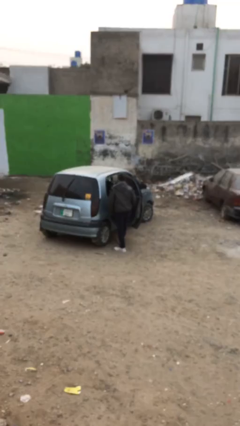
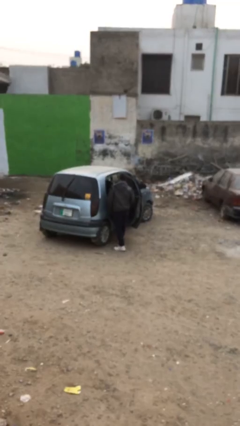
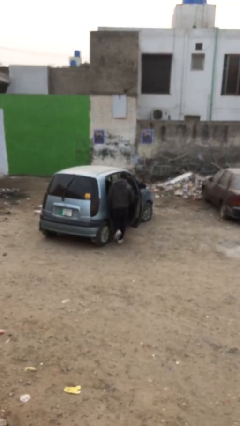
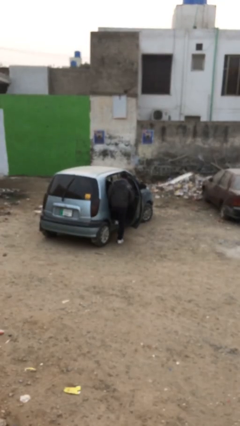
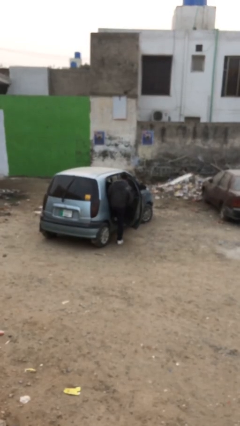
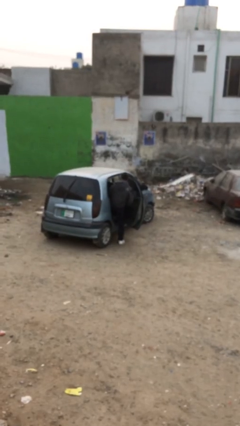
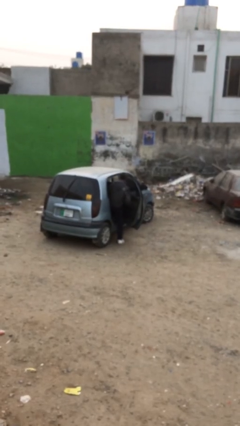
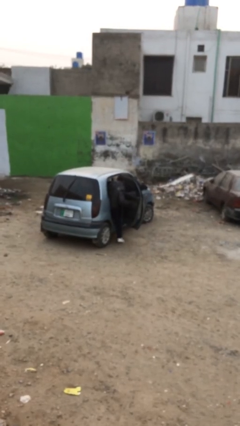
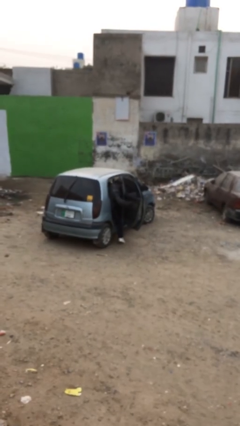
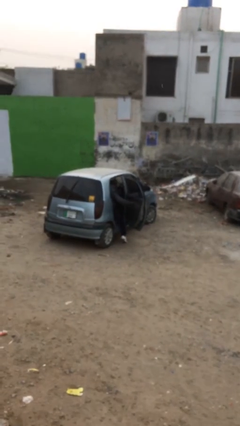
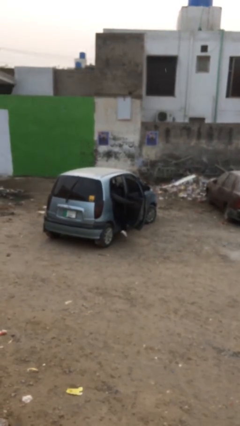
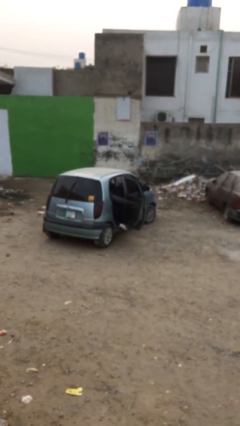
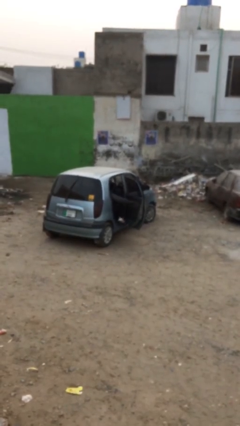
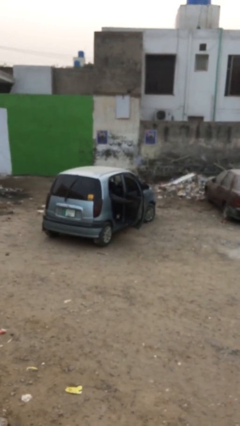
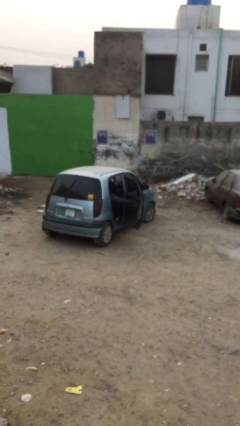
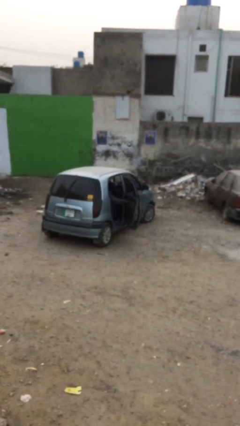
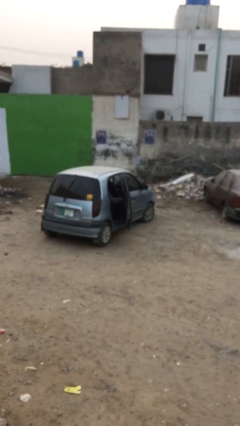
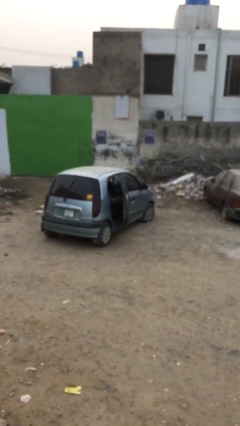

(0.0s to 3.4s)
person enters car

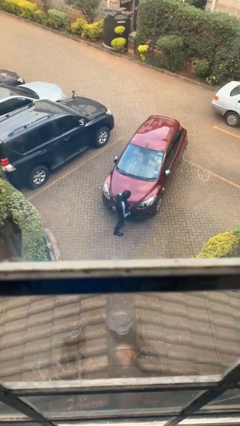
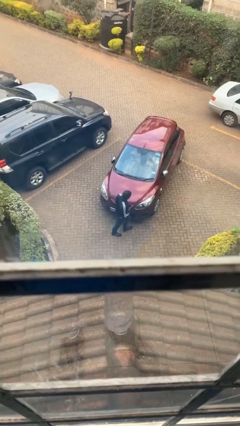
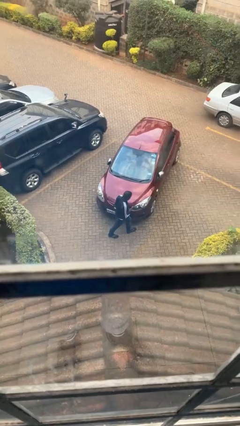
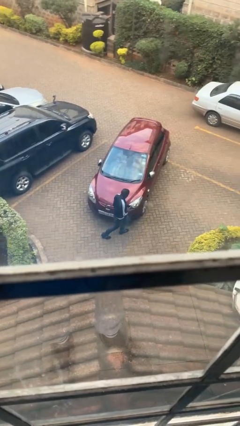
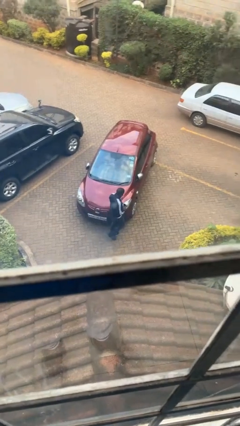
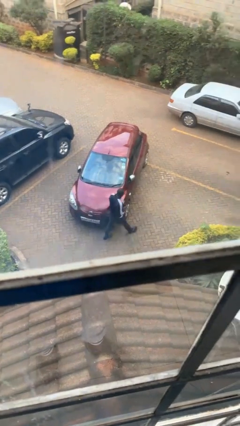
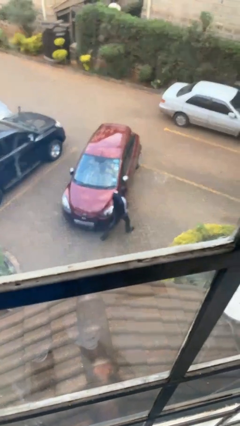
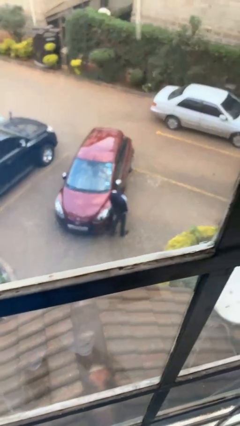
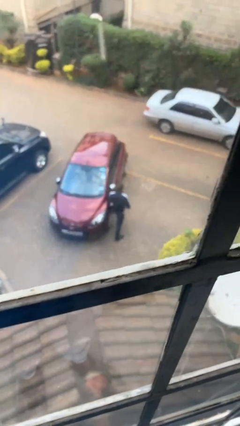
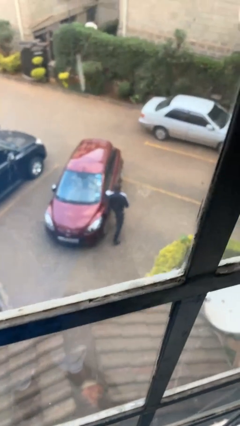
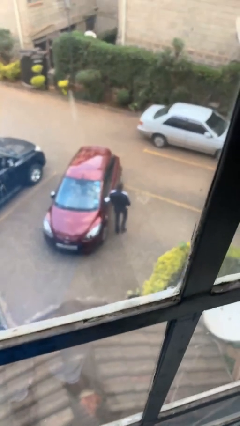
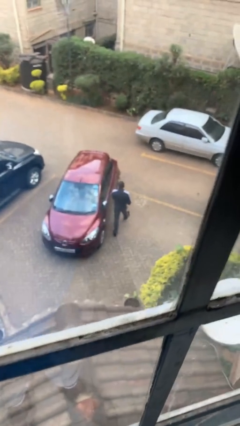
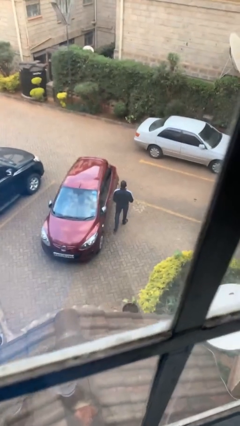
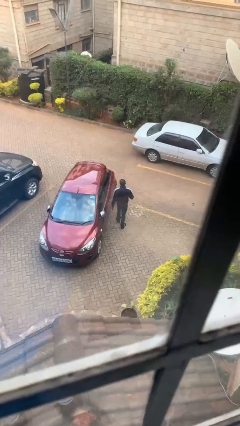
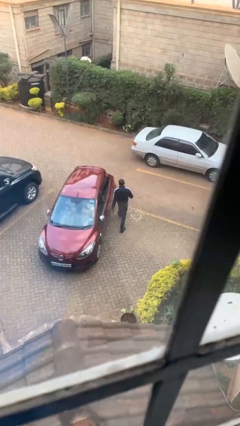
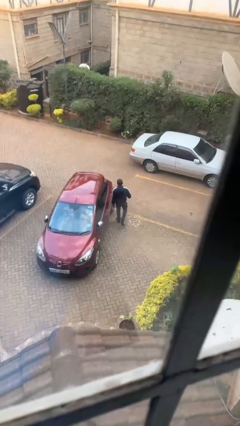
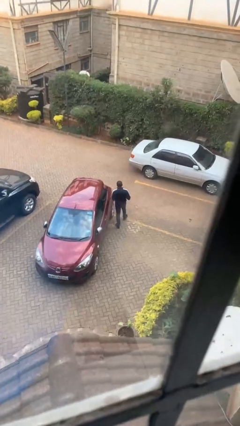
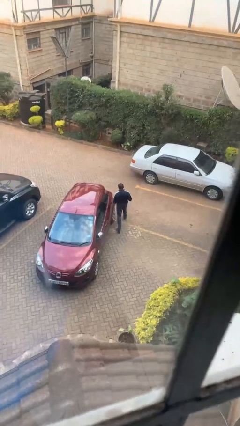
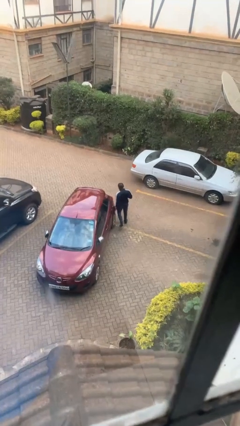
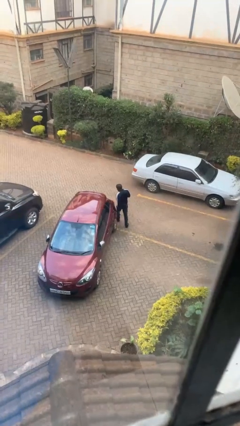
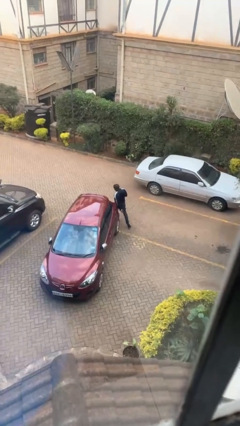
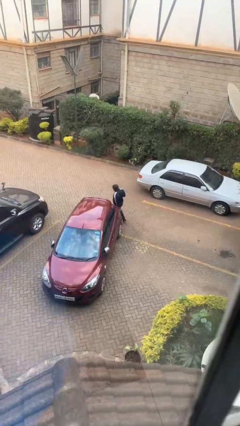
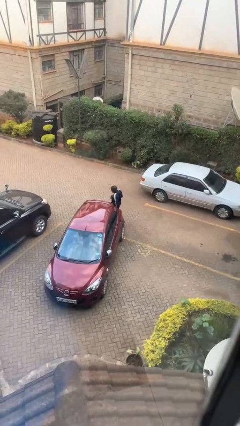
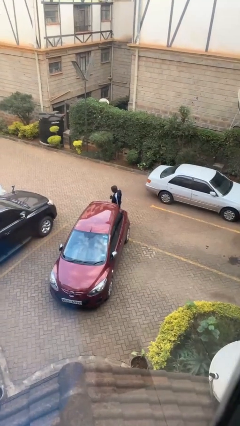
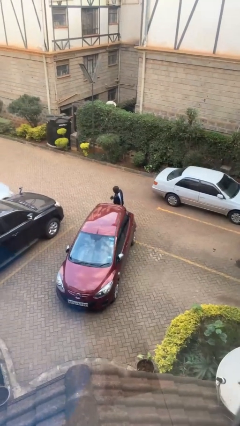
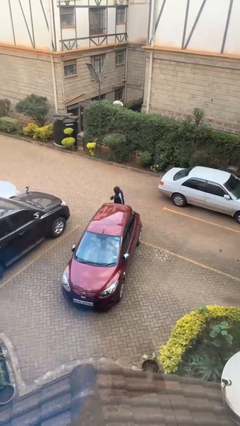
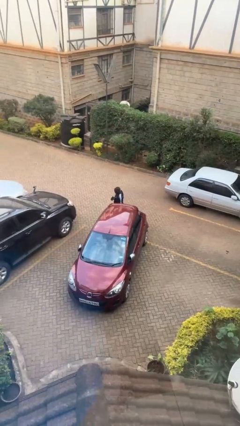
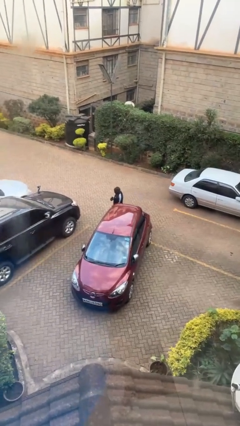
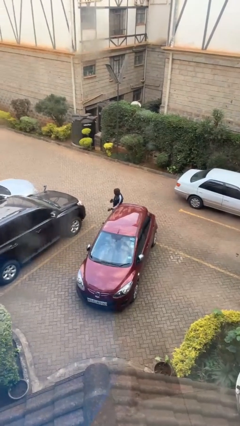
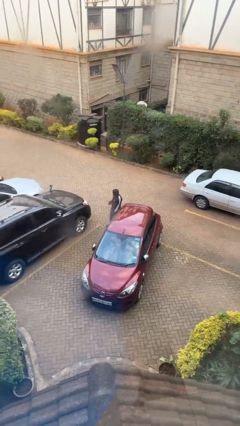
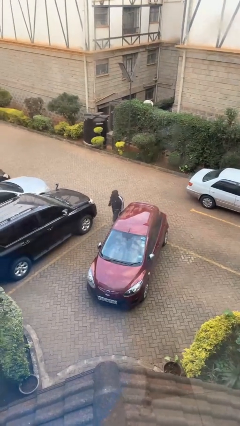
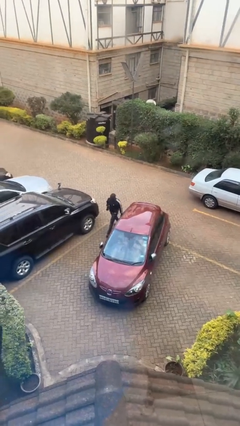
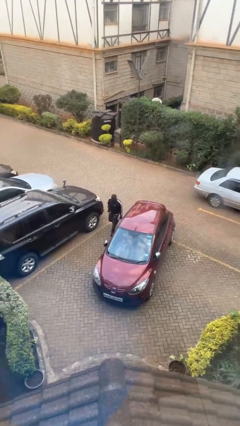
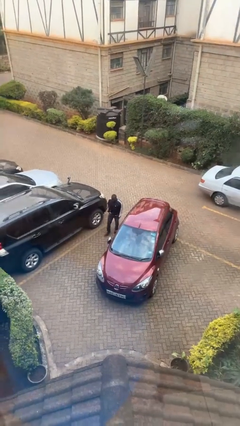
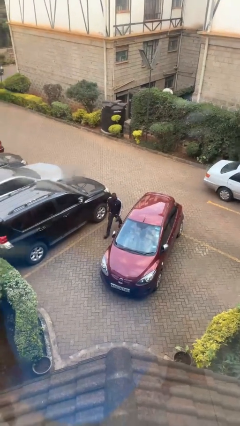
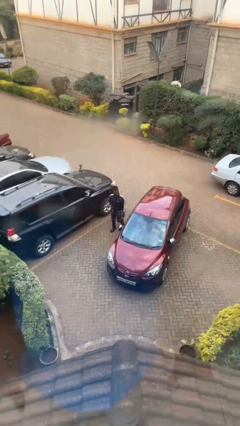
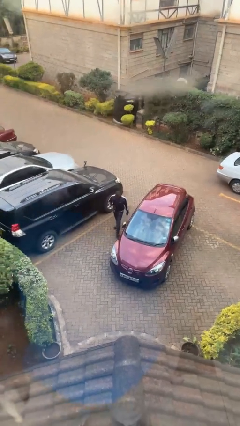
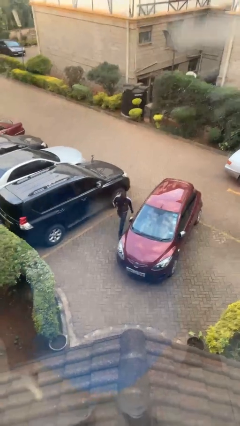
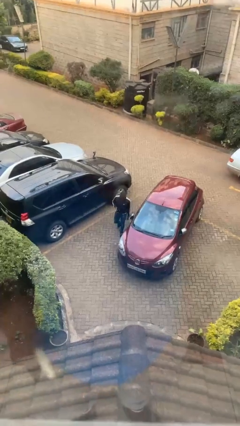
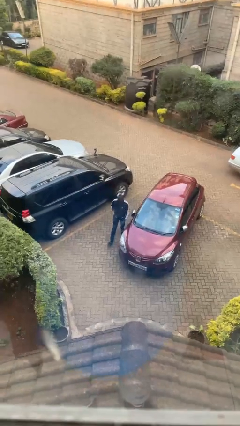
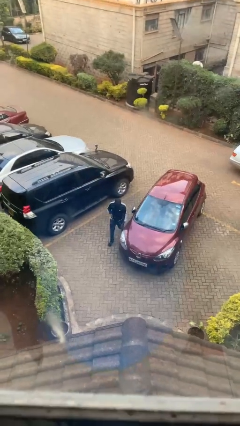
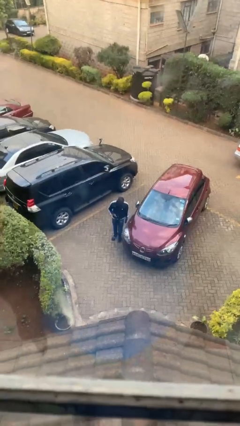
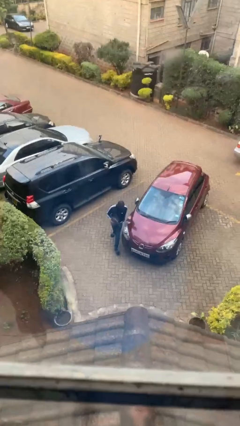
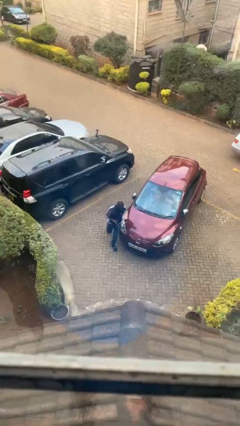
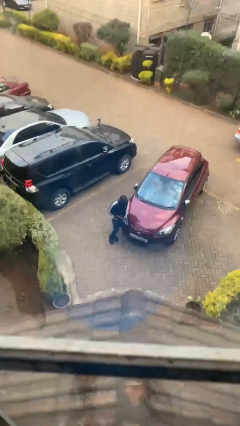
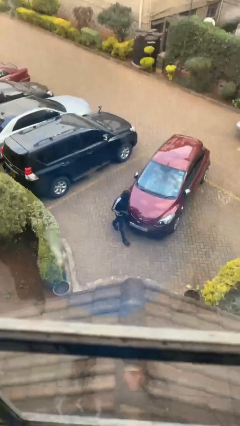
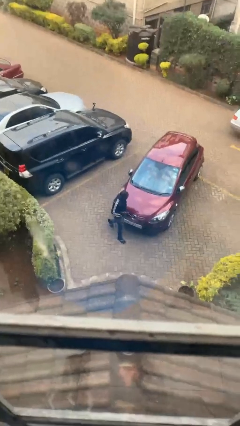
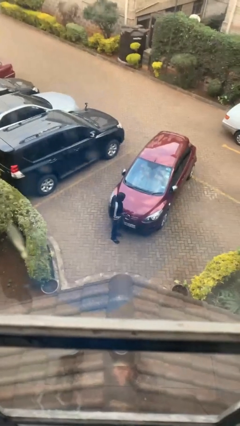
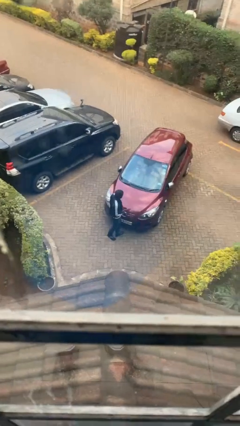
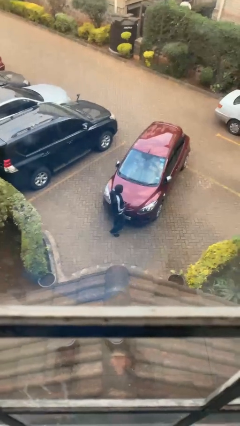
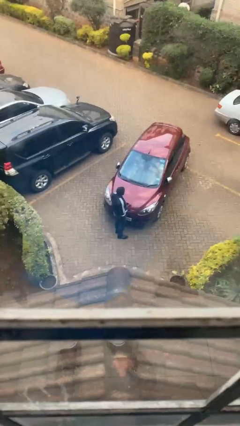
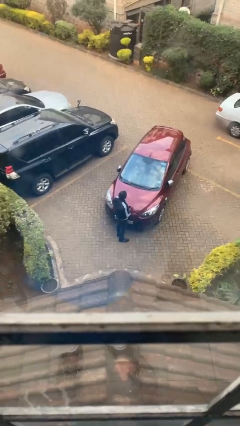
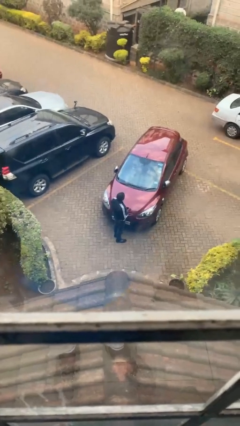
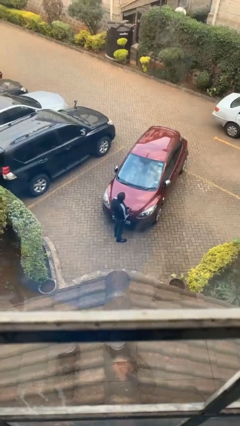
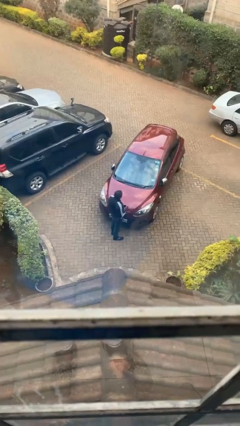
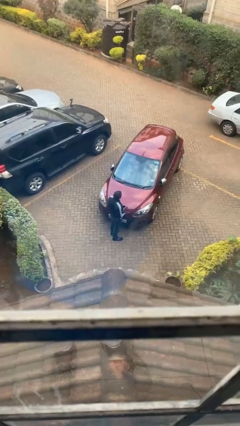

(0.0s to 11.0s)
person walks around car

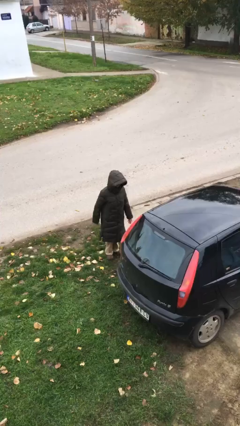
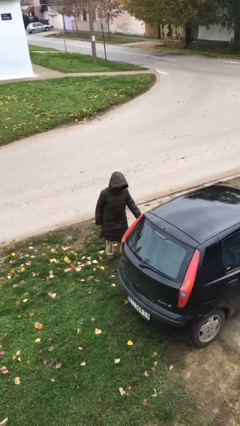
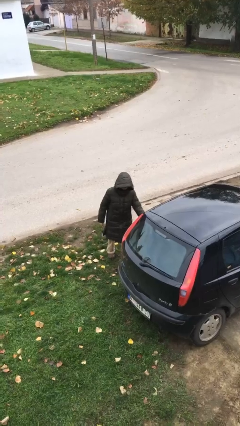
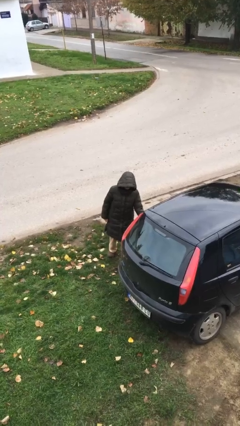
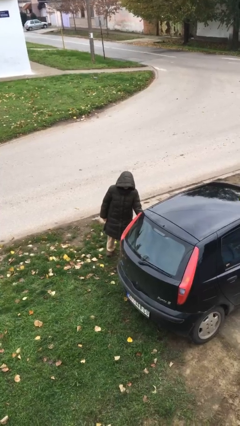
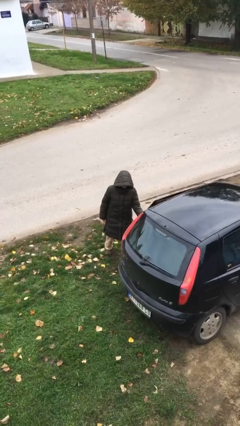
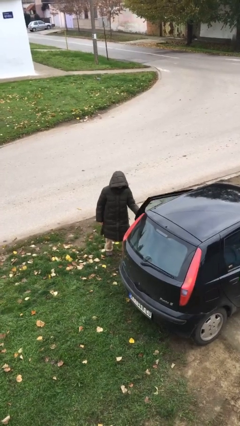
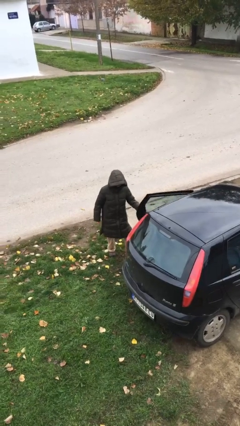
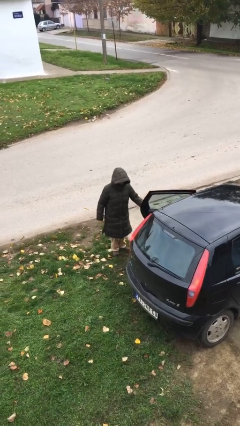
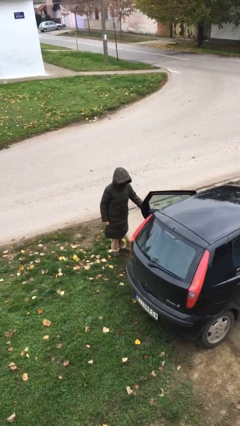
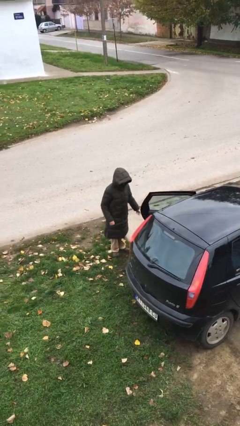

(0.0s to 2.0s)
person opens car door

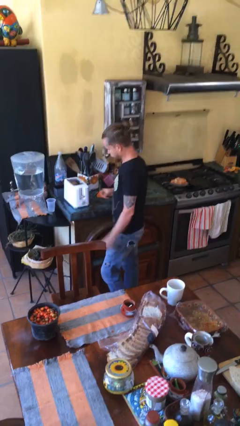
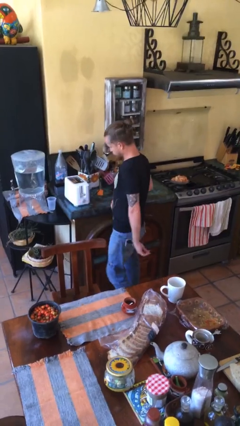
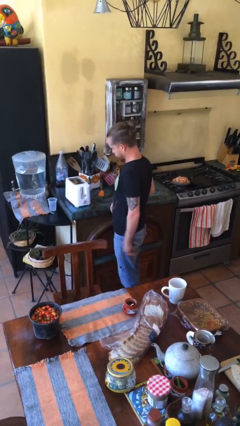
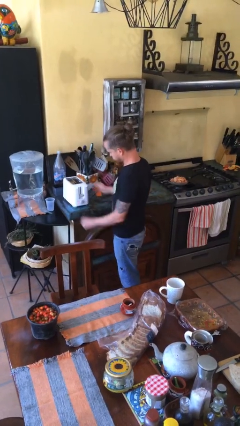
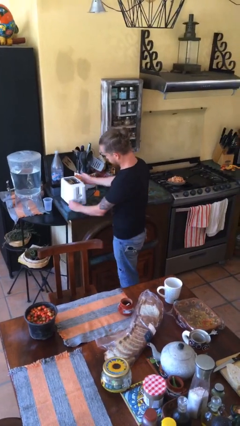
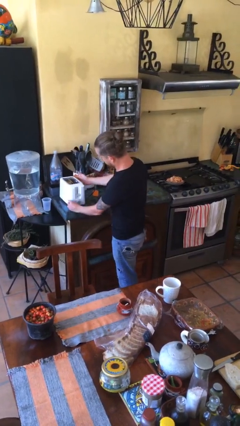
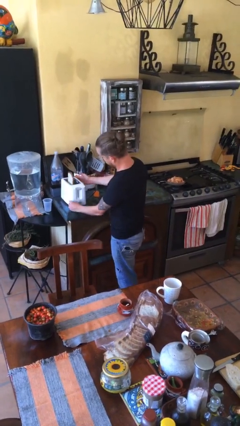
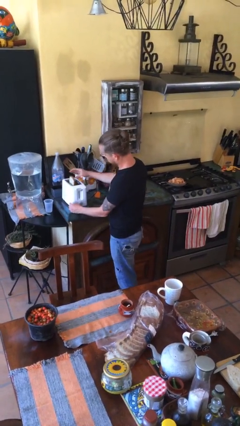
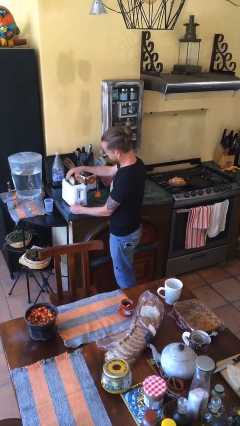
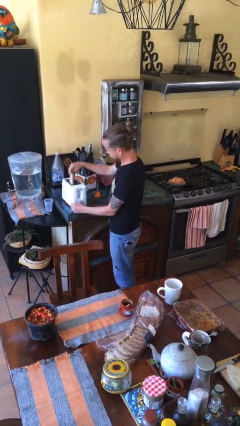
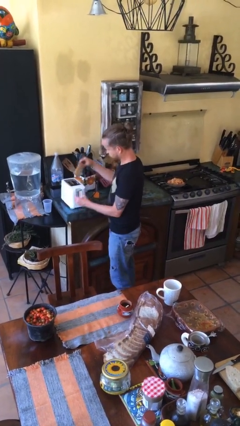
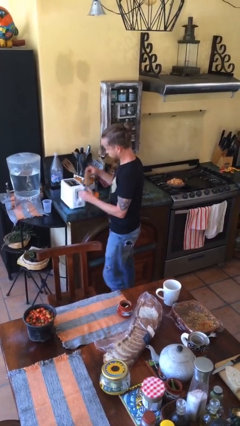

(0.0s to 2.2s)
person takes object from toaster
